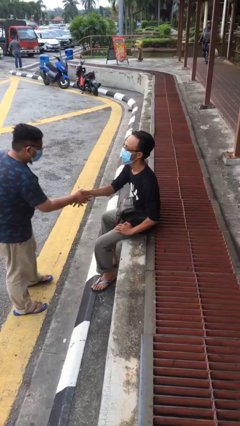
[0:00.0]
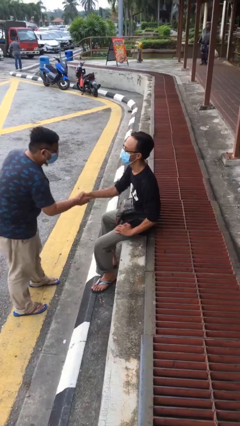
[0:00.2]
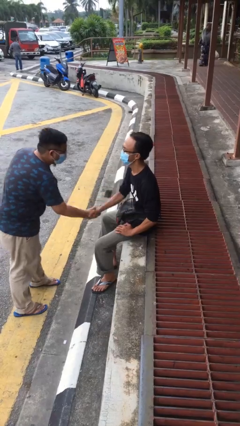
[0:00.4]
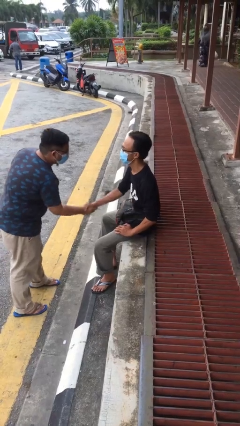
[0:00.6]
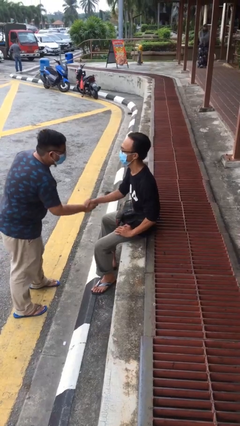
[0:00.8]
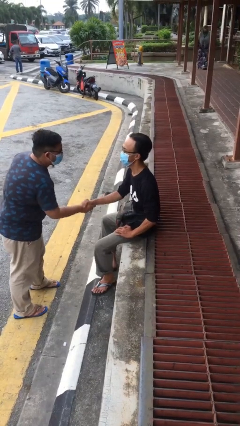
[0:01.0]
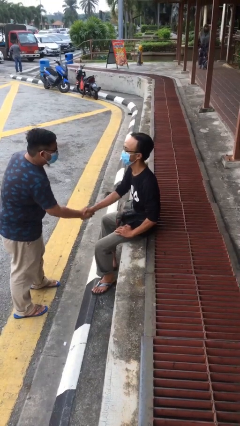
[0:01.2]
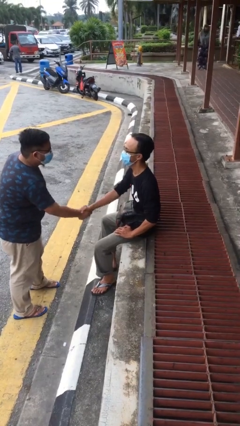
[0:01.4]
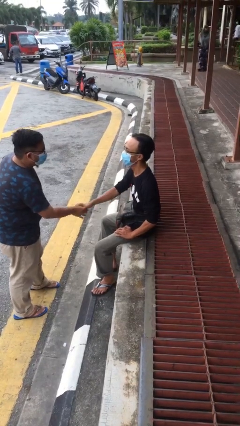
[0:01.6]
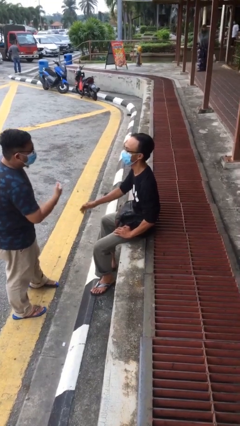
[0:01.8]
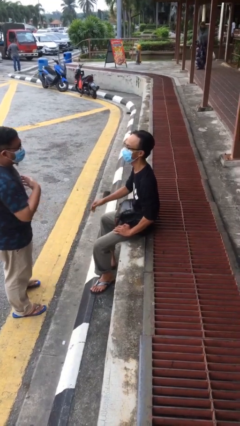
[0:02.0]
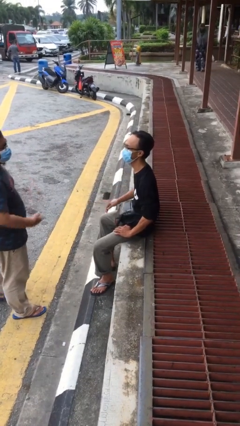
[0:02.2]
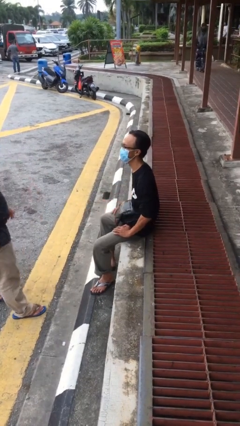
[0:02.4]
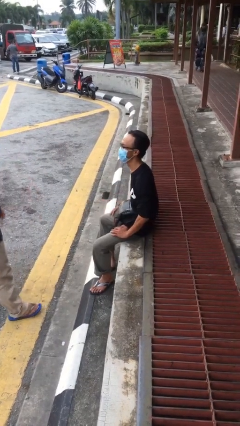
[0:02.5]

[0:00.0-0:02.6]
person shakes hand

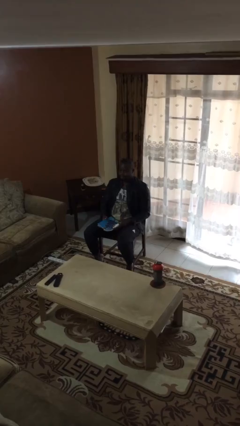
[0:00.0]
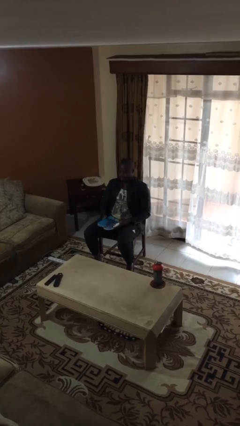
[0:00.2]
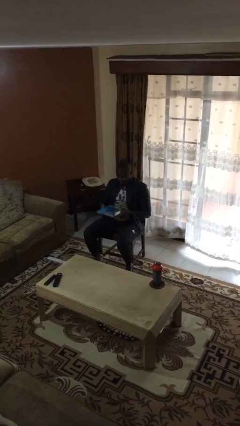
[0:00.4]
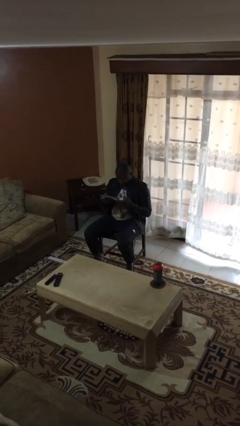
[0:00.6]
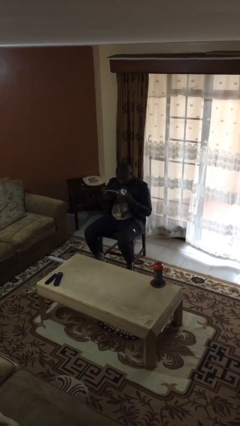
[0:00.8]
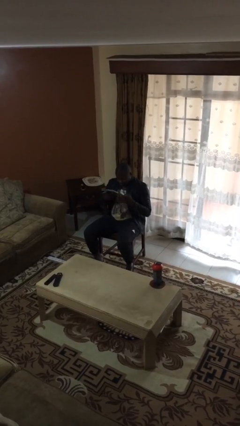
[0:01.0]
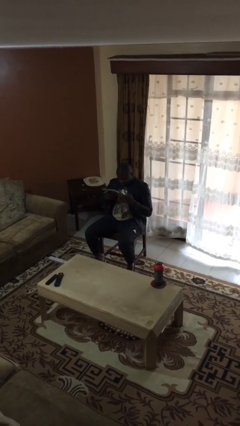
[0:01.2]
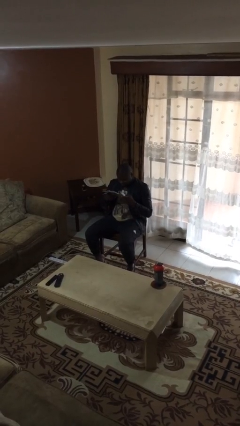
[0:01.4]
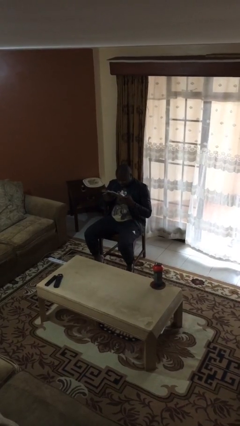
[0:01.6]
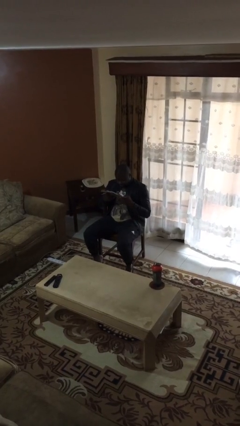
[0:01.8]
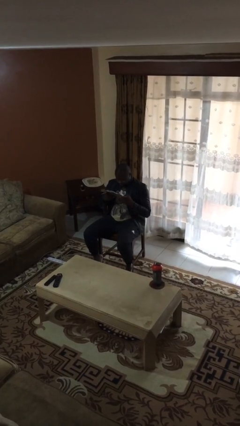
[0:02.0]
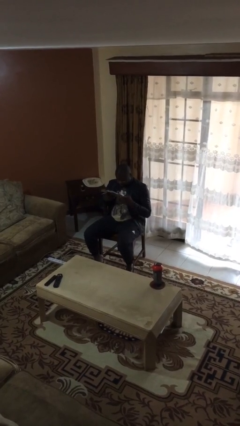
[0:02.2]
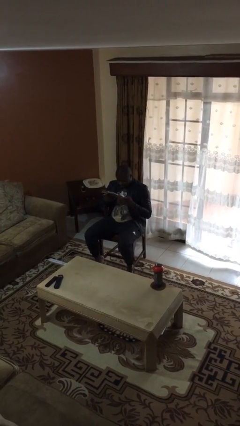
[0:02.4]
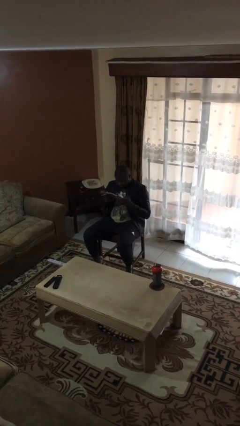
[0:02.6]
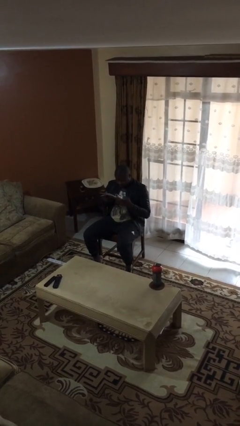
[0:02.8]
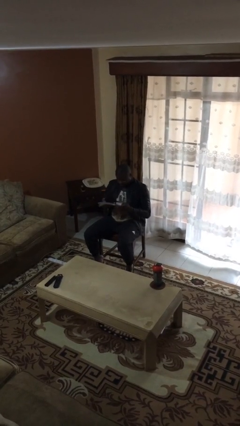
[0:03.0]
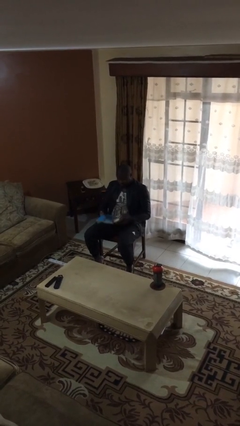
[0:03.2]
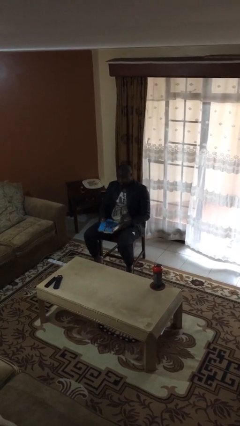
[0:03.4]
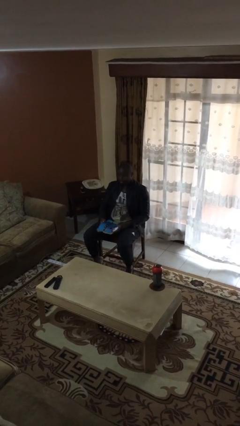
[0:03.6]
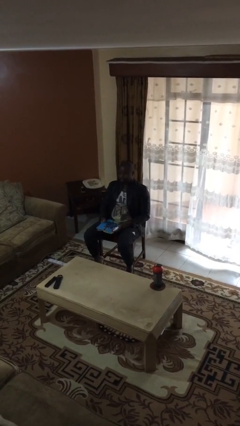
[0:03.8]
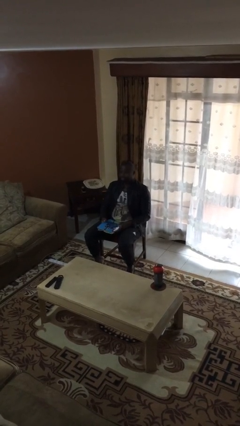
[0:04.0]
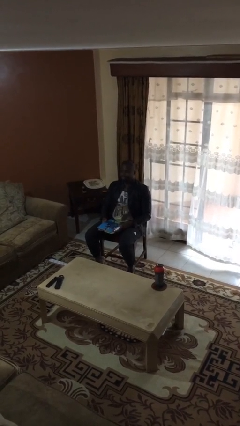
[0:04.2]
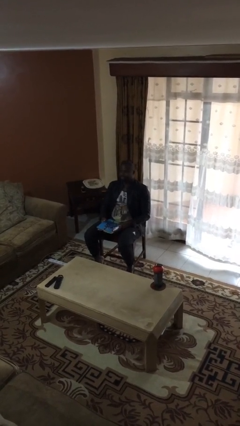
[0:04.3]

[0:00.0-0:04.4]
person reads document

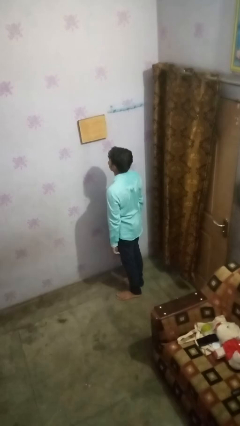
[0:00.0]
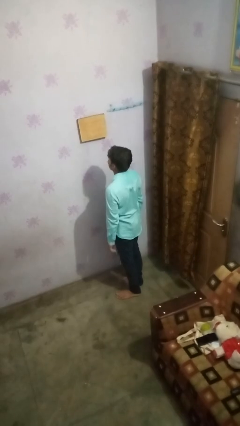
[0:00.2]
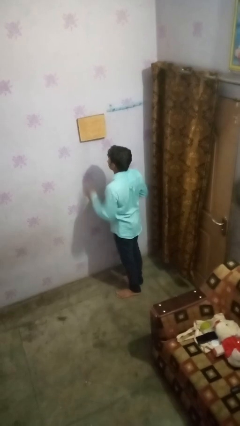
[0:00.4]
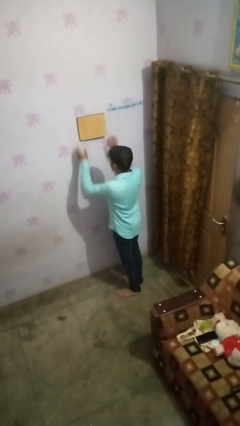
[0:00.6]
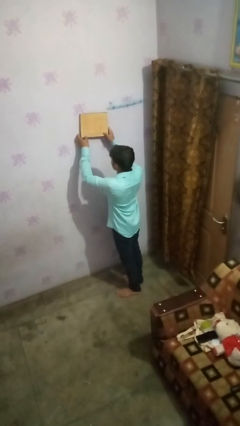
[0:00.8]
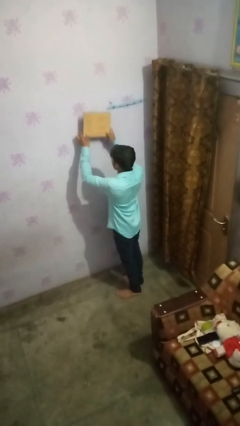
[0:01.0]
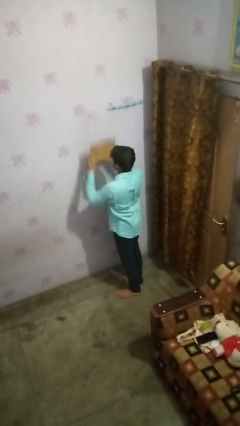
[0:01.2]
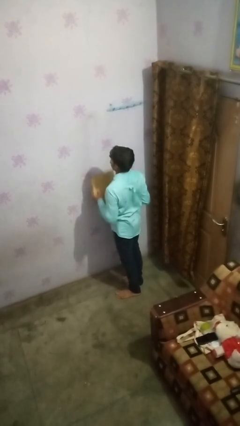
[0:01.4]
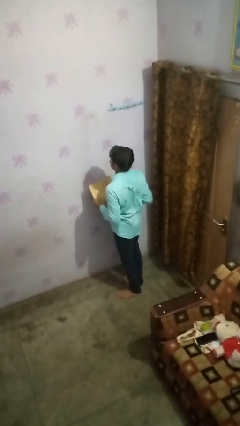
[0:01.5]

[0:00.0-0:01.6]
person takes down picture frame

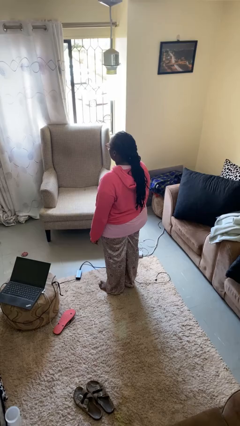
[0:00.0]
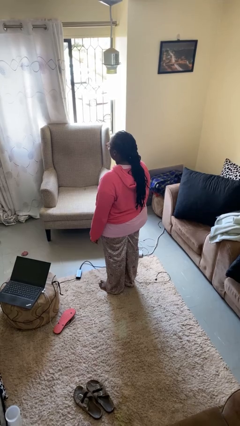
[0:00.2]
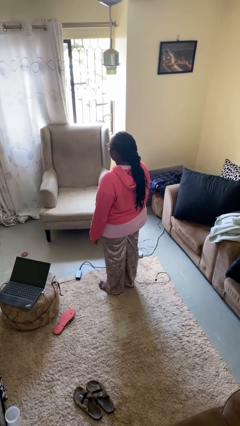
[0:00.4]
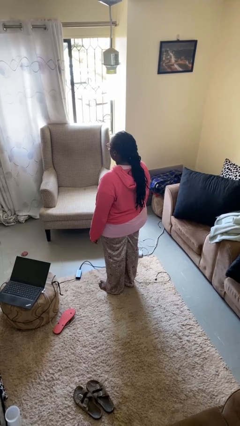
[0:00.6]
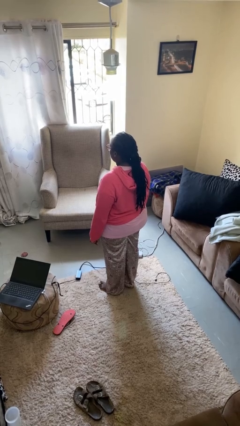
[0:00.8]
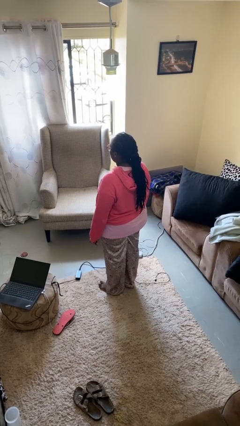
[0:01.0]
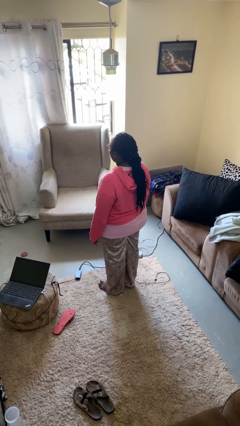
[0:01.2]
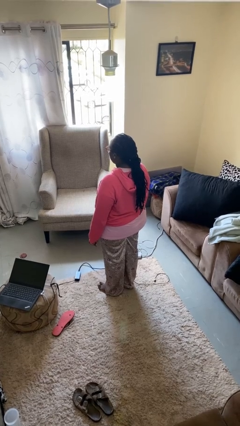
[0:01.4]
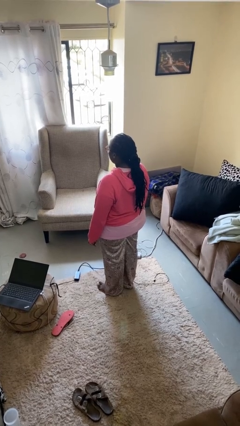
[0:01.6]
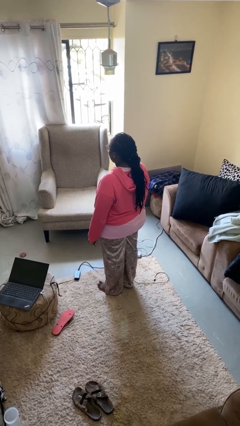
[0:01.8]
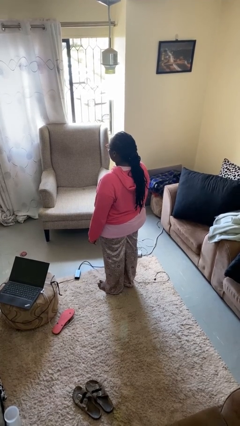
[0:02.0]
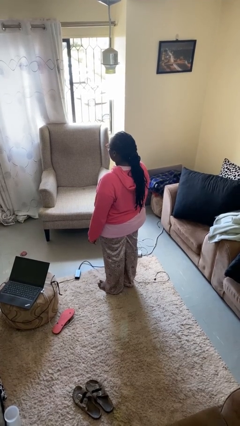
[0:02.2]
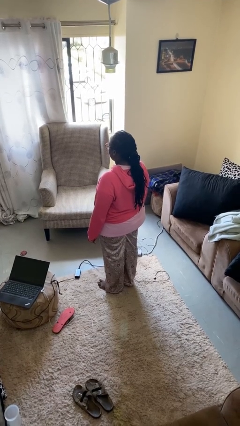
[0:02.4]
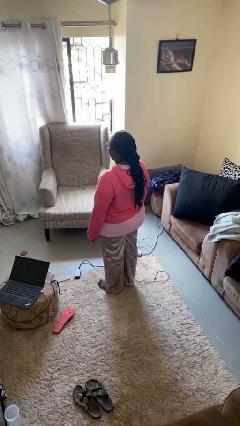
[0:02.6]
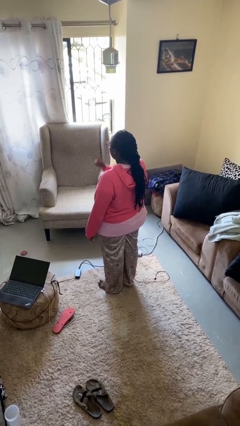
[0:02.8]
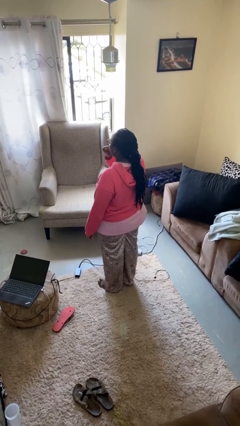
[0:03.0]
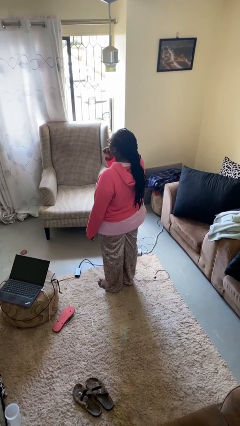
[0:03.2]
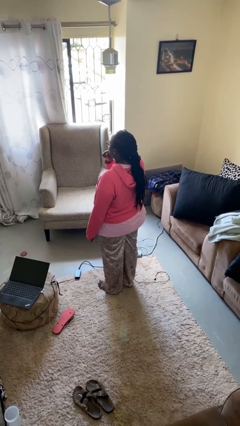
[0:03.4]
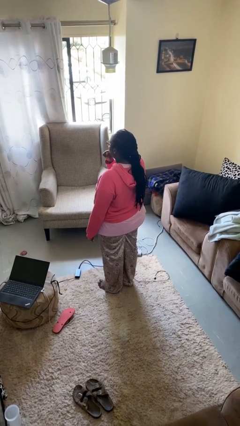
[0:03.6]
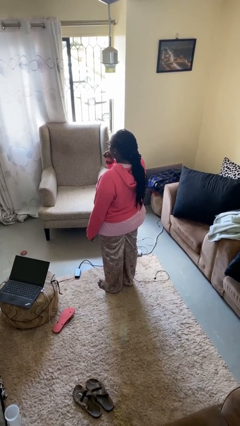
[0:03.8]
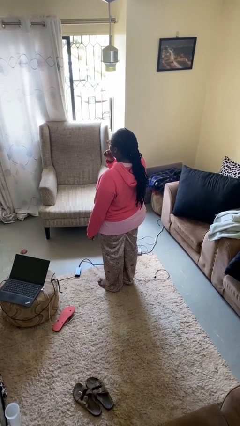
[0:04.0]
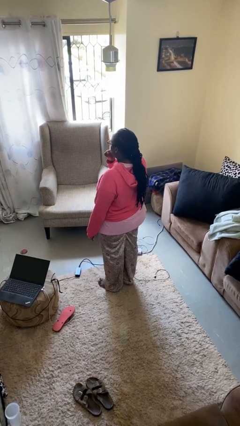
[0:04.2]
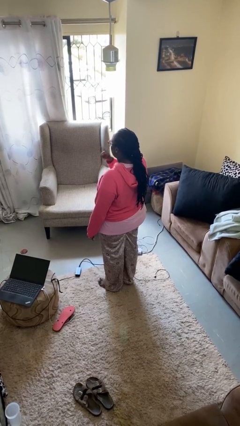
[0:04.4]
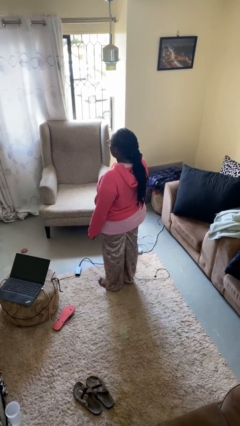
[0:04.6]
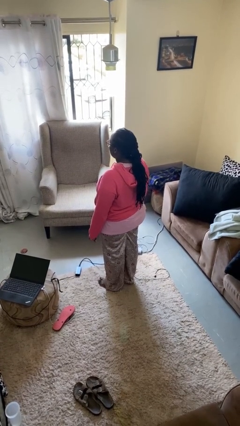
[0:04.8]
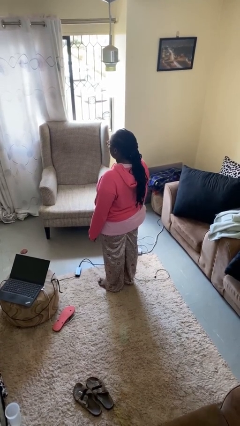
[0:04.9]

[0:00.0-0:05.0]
person gestures be quiet

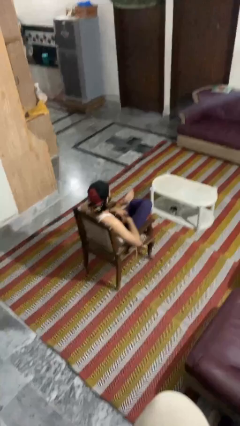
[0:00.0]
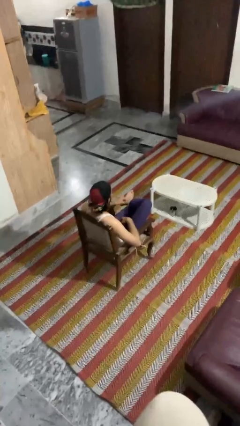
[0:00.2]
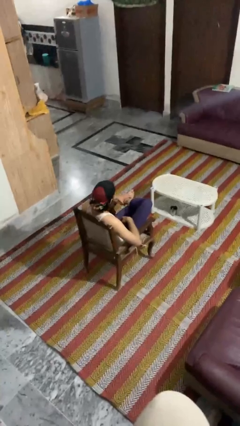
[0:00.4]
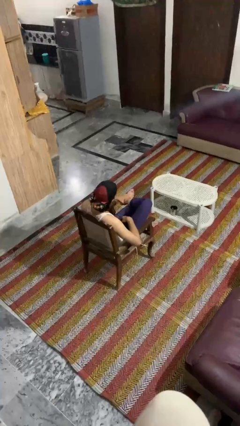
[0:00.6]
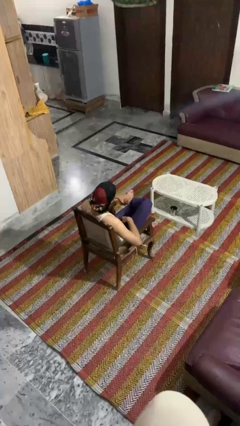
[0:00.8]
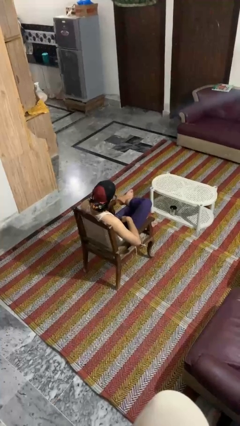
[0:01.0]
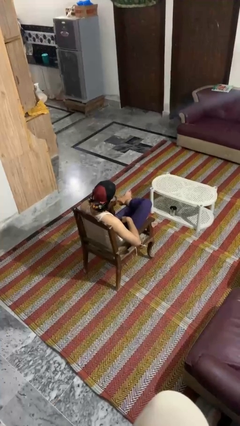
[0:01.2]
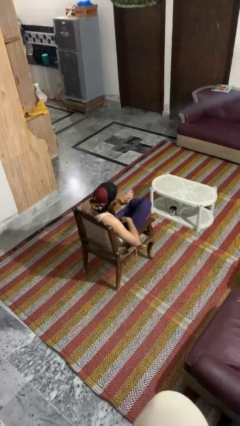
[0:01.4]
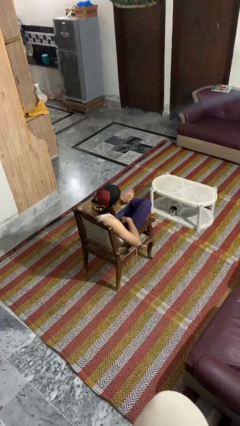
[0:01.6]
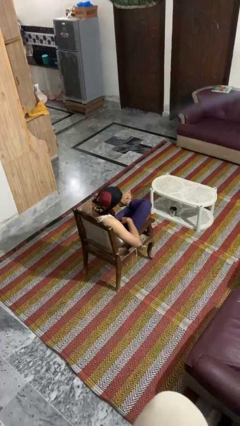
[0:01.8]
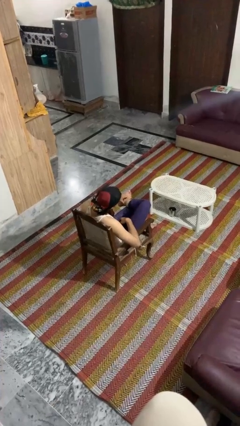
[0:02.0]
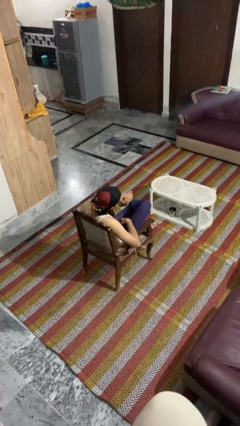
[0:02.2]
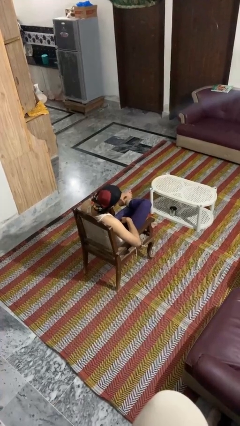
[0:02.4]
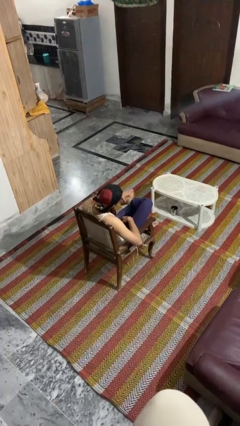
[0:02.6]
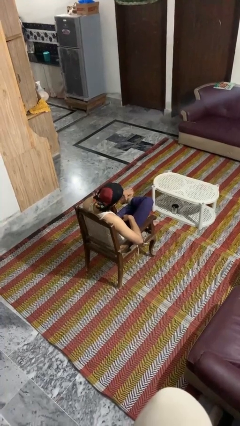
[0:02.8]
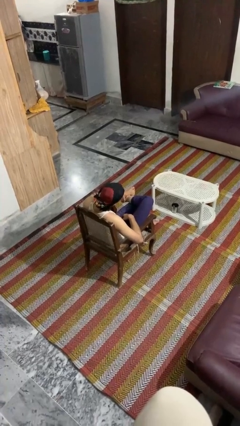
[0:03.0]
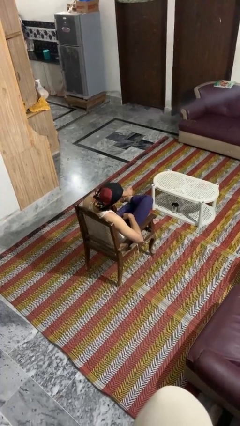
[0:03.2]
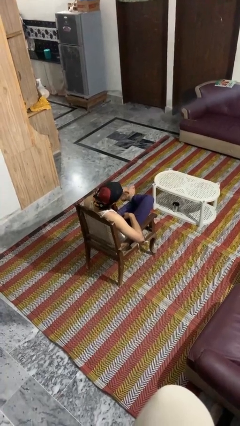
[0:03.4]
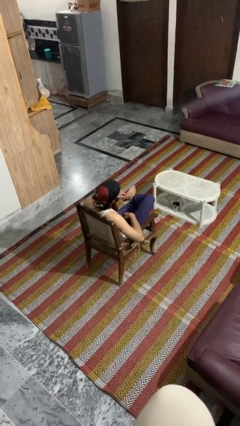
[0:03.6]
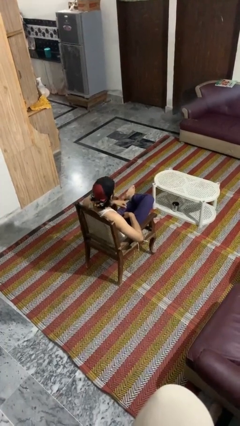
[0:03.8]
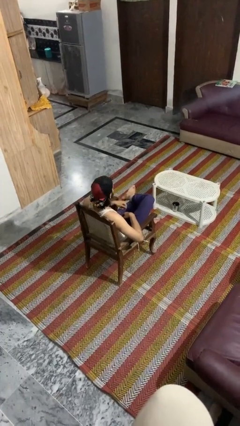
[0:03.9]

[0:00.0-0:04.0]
person rubs foot
